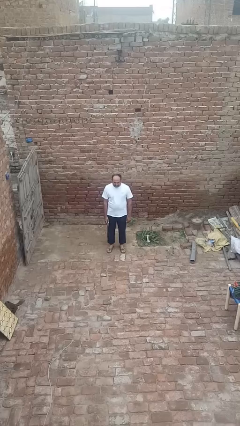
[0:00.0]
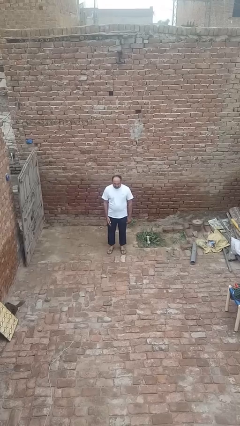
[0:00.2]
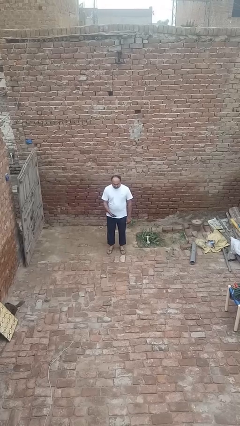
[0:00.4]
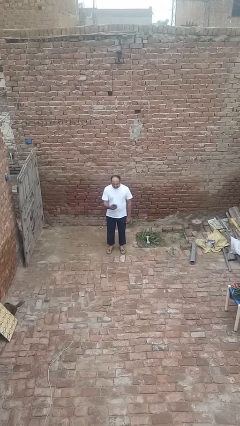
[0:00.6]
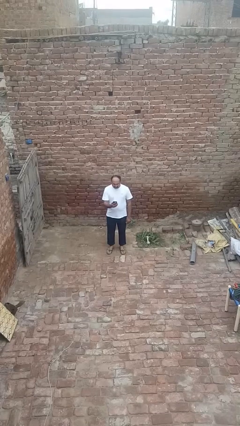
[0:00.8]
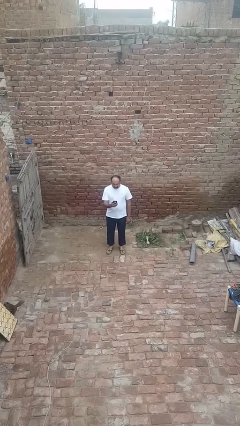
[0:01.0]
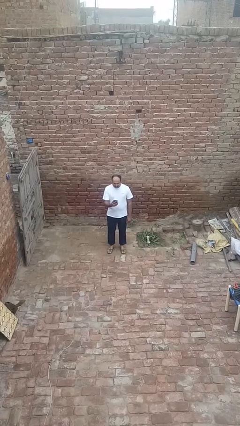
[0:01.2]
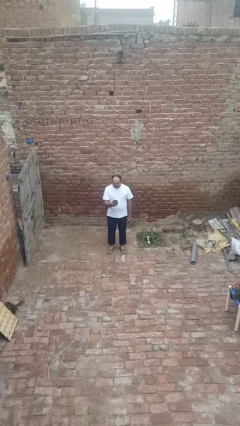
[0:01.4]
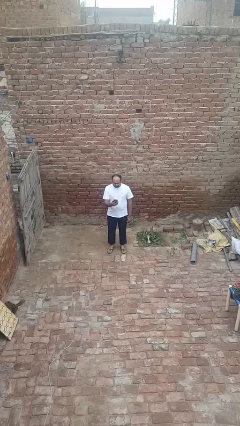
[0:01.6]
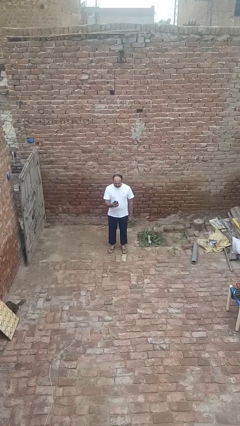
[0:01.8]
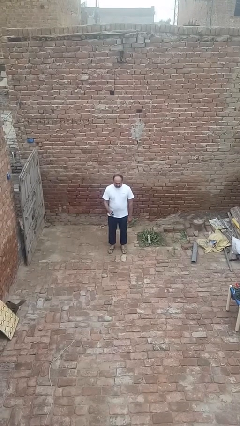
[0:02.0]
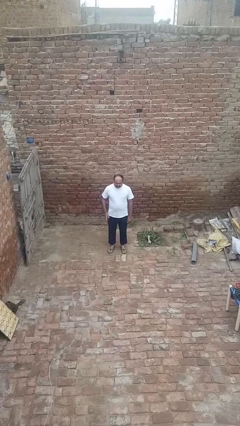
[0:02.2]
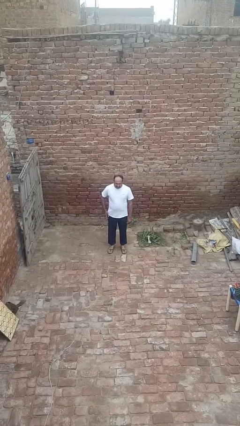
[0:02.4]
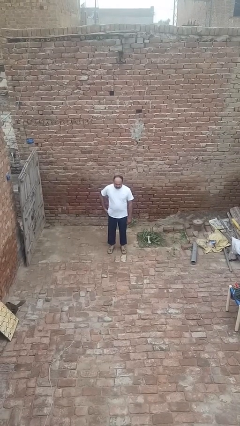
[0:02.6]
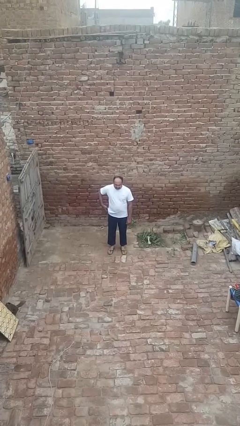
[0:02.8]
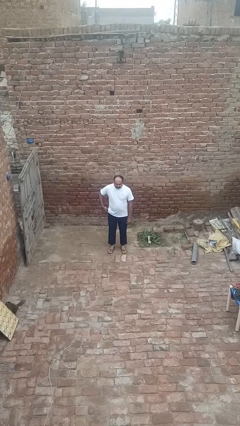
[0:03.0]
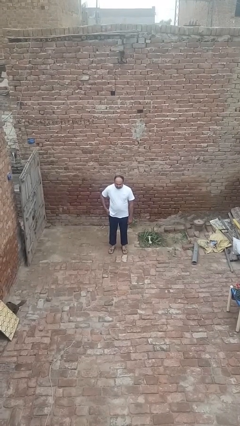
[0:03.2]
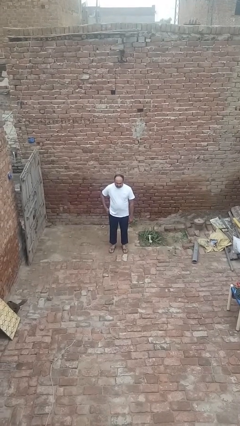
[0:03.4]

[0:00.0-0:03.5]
person puts phone into pocket

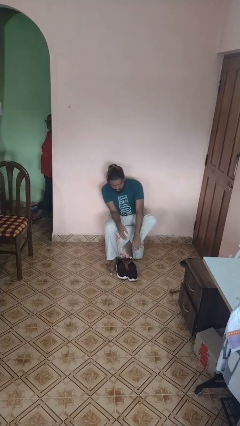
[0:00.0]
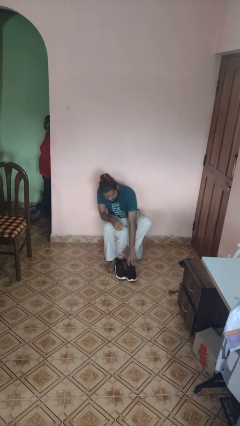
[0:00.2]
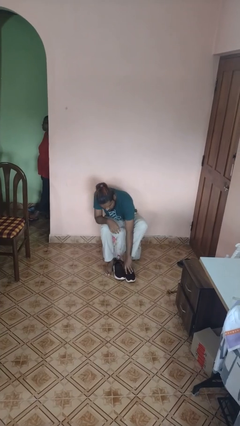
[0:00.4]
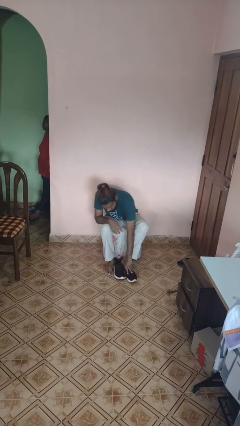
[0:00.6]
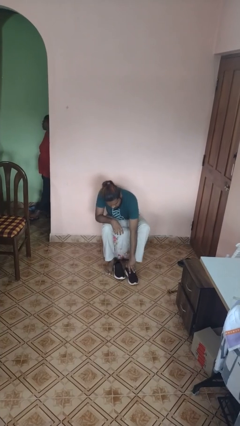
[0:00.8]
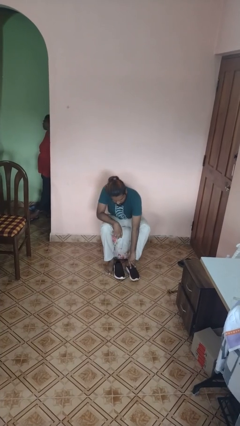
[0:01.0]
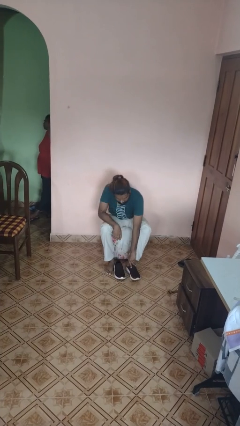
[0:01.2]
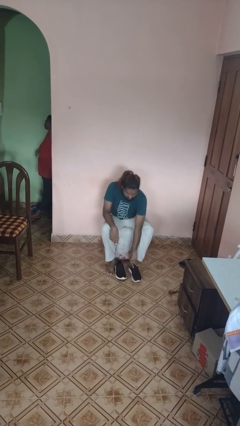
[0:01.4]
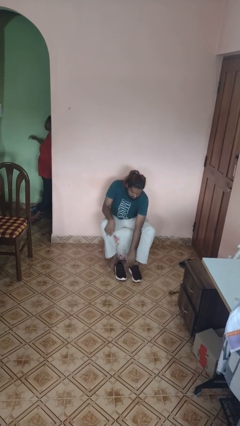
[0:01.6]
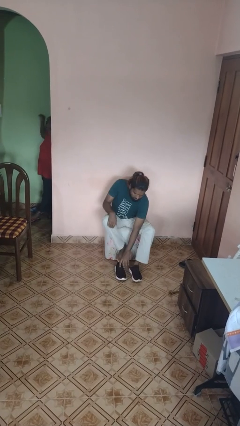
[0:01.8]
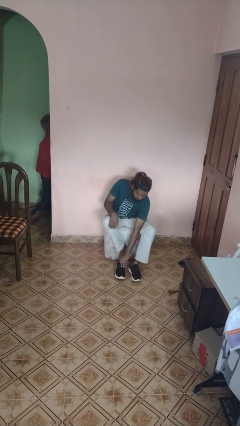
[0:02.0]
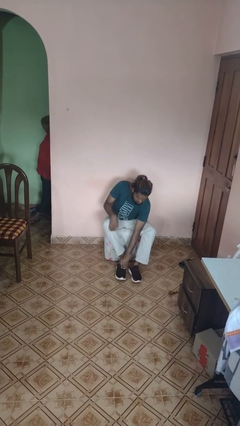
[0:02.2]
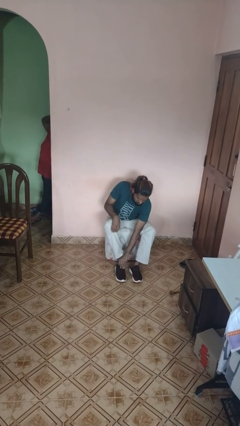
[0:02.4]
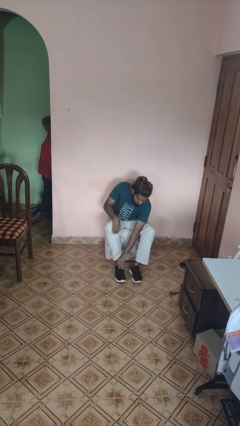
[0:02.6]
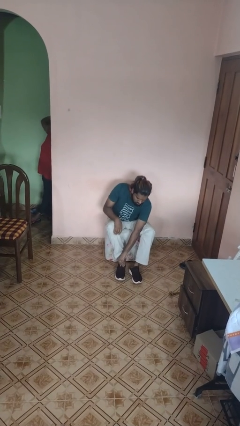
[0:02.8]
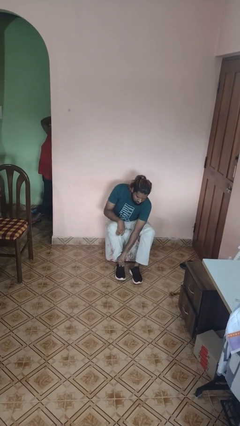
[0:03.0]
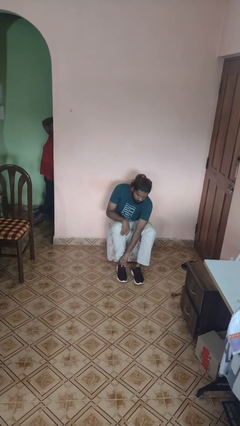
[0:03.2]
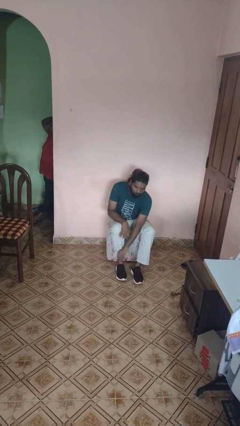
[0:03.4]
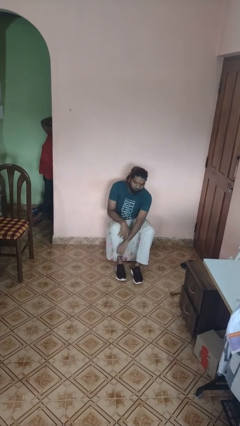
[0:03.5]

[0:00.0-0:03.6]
person puts on shoes

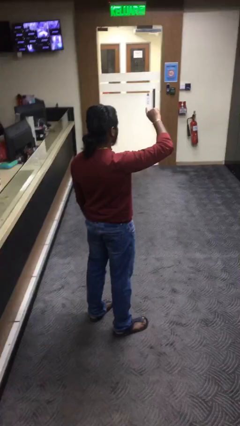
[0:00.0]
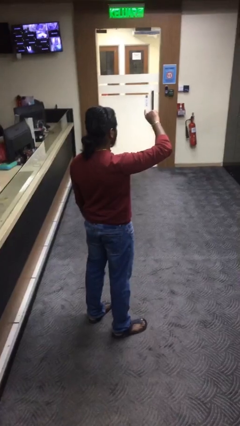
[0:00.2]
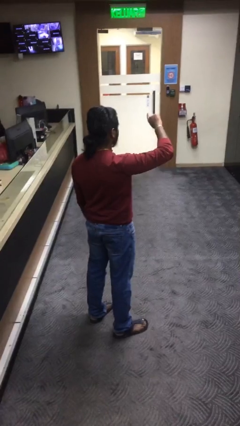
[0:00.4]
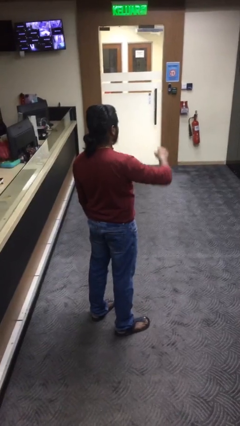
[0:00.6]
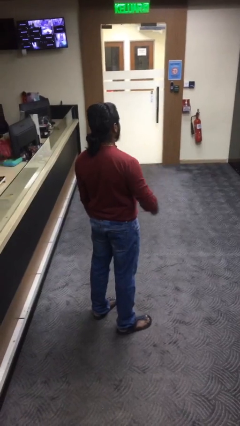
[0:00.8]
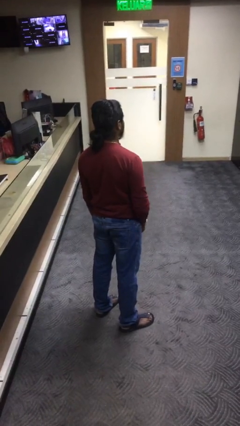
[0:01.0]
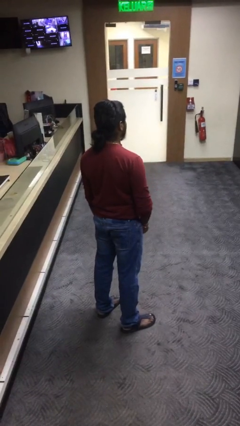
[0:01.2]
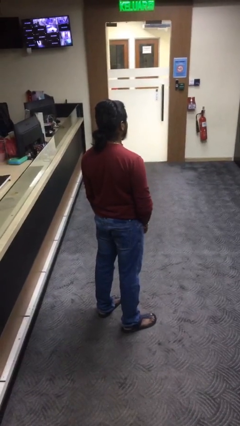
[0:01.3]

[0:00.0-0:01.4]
person gestures swipe down

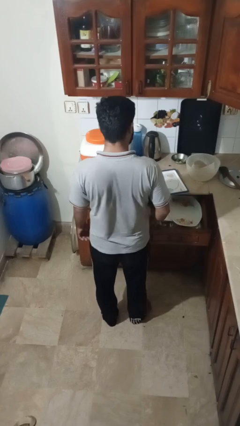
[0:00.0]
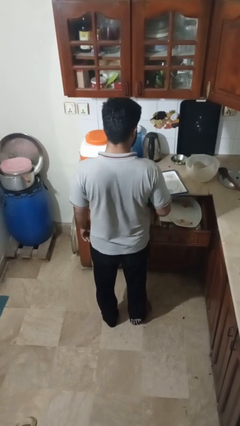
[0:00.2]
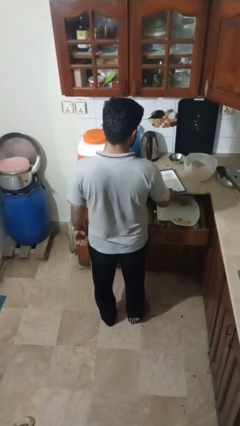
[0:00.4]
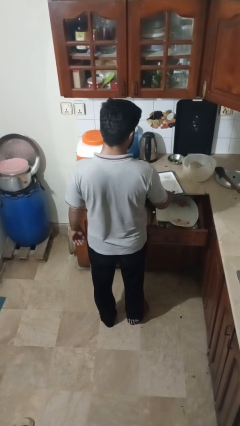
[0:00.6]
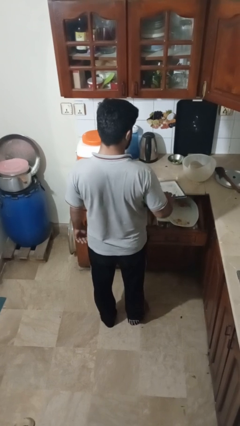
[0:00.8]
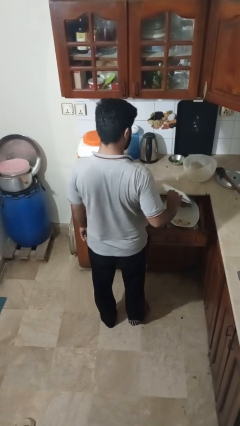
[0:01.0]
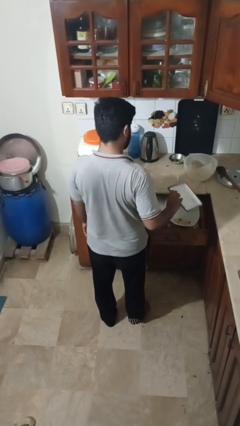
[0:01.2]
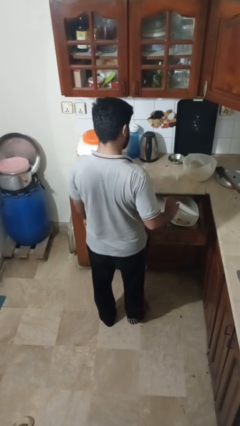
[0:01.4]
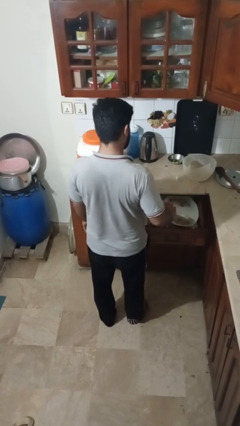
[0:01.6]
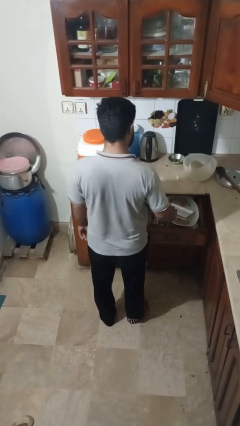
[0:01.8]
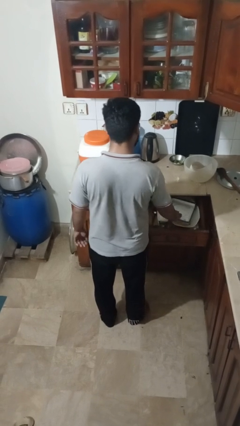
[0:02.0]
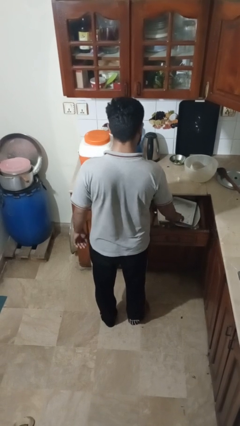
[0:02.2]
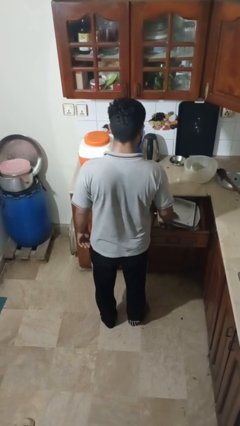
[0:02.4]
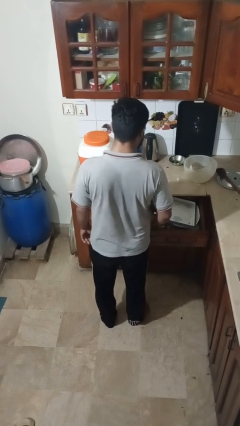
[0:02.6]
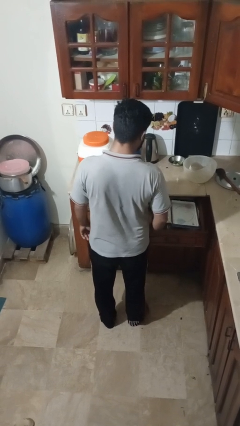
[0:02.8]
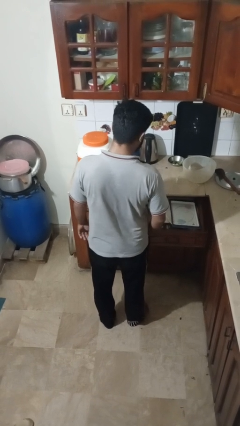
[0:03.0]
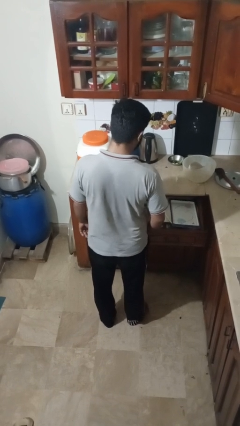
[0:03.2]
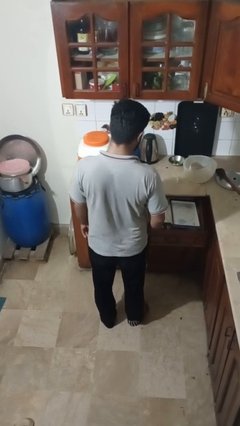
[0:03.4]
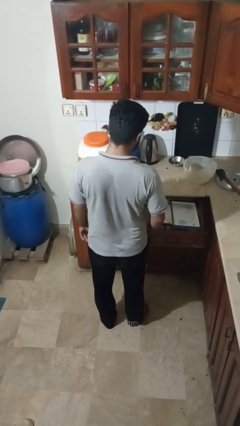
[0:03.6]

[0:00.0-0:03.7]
person puts object into kitchen drawer

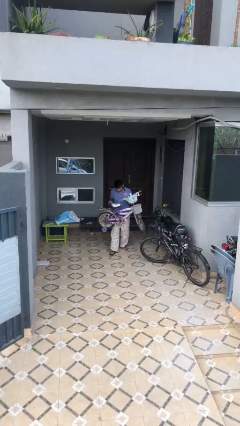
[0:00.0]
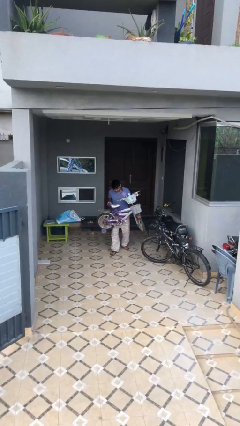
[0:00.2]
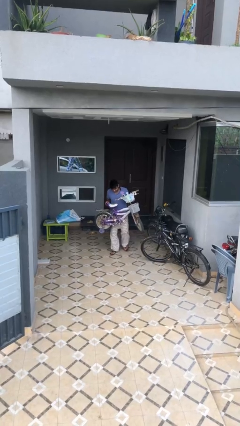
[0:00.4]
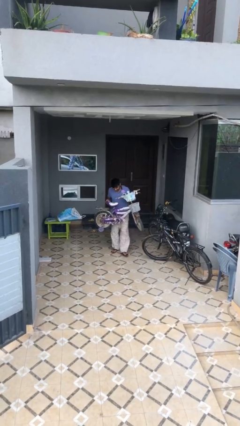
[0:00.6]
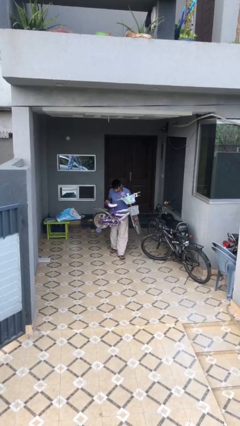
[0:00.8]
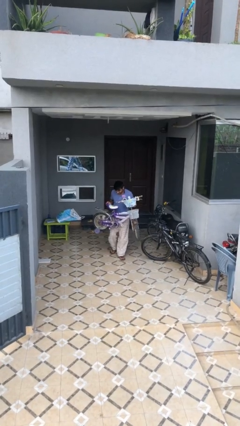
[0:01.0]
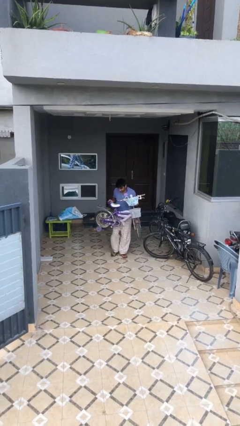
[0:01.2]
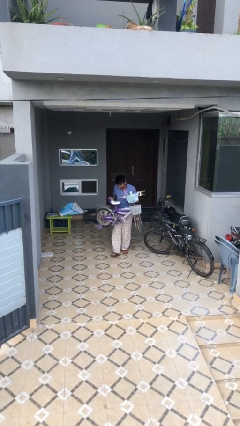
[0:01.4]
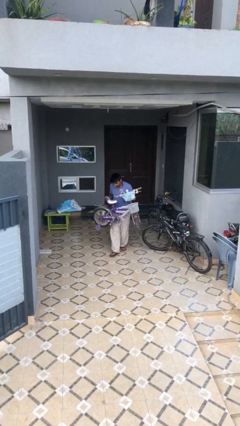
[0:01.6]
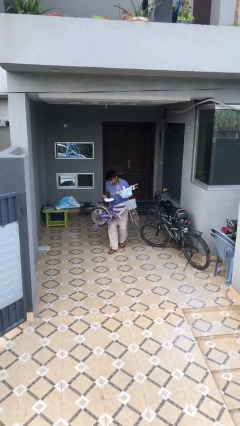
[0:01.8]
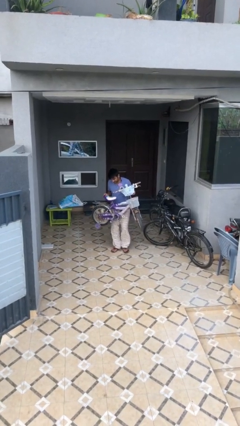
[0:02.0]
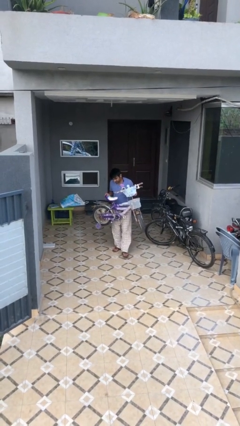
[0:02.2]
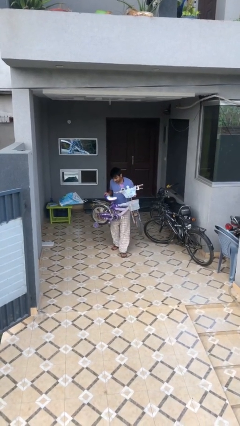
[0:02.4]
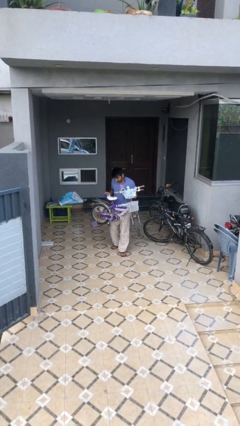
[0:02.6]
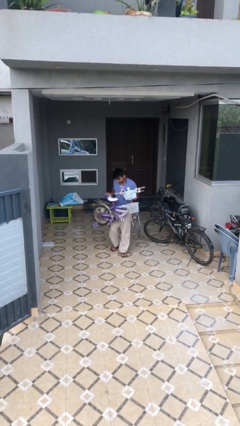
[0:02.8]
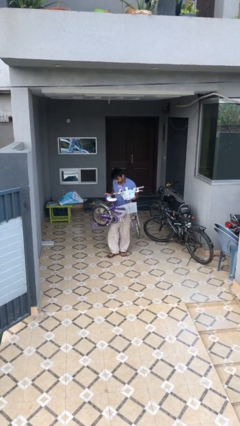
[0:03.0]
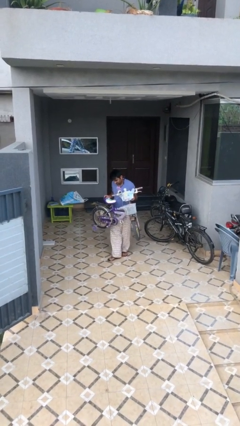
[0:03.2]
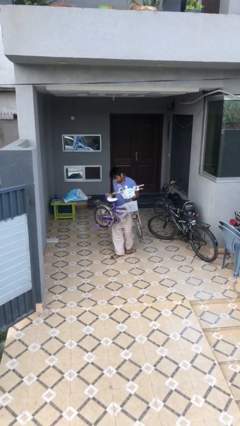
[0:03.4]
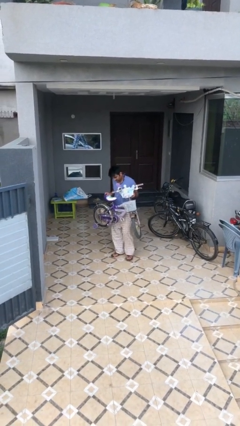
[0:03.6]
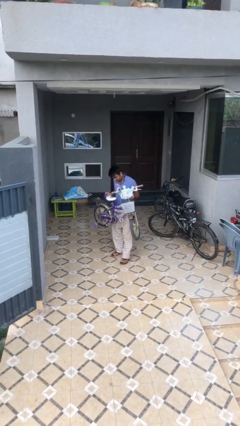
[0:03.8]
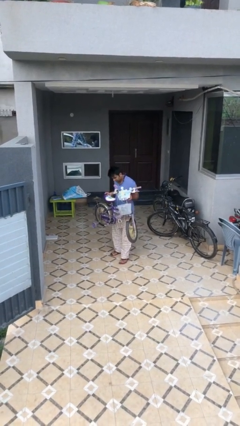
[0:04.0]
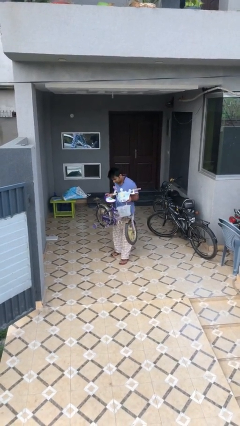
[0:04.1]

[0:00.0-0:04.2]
person carries heavy object

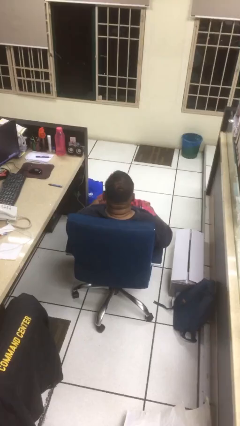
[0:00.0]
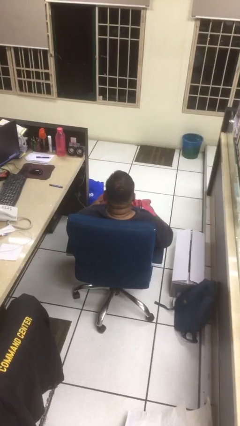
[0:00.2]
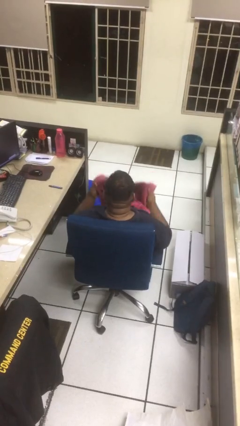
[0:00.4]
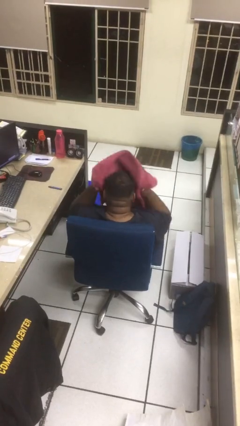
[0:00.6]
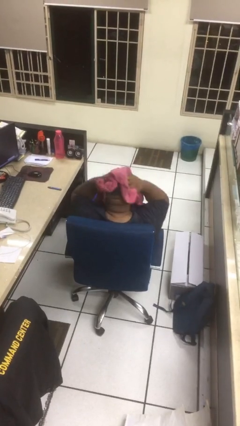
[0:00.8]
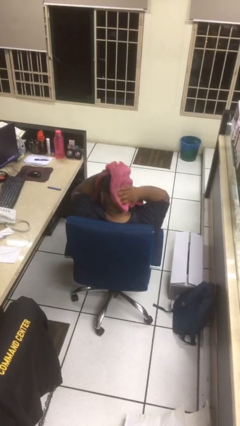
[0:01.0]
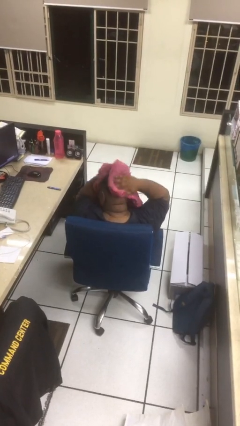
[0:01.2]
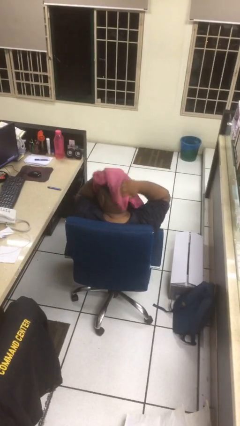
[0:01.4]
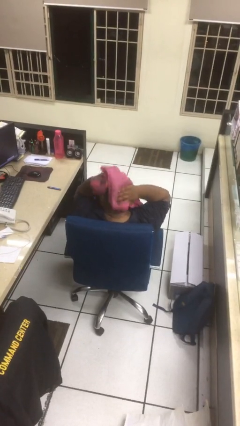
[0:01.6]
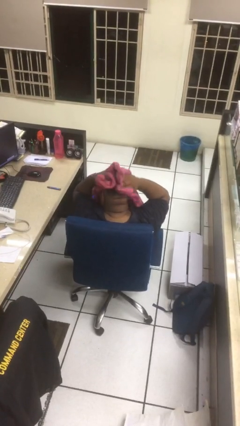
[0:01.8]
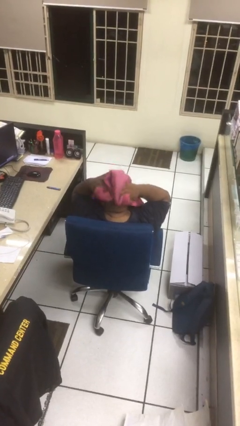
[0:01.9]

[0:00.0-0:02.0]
person dries hair with towel
